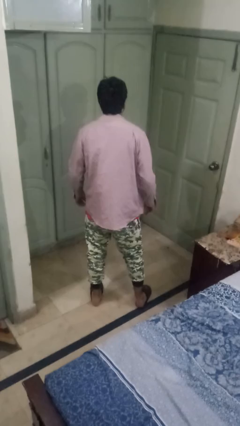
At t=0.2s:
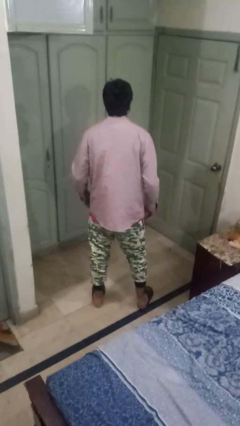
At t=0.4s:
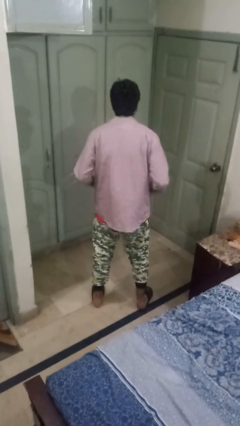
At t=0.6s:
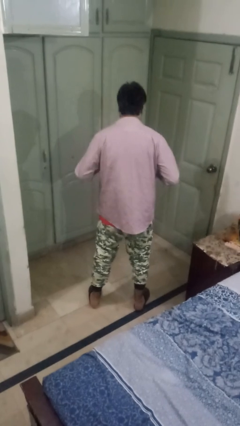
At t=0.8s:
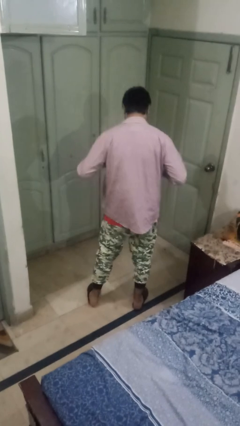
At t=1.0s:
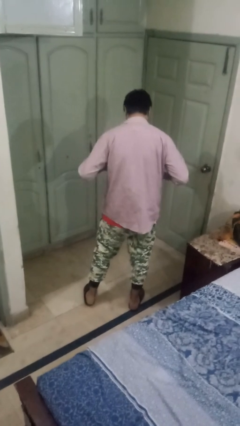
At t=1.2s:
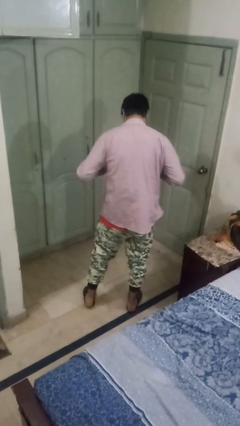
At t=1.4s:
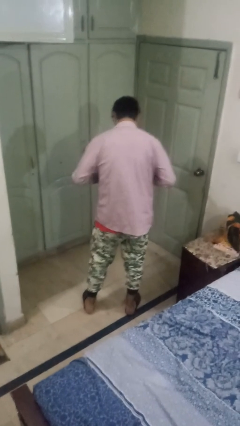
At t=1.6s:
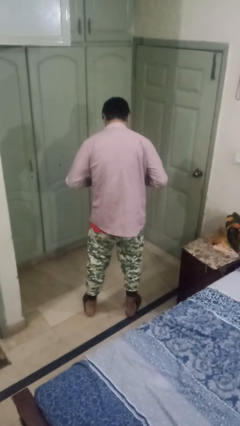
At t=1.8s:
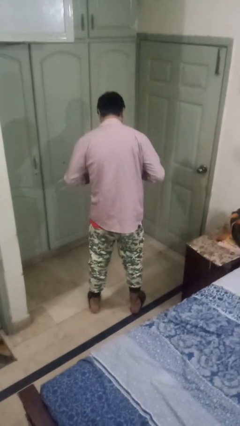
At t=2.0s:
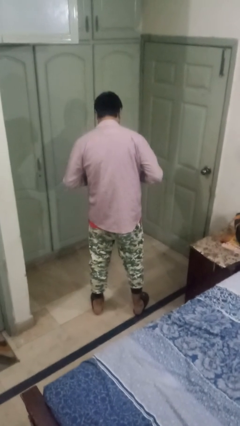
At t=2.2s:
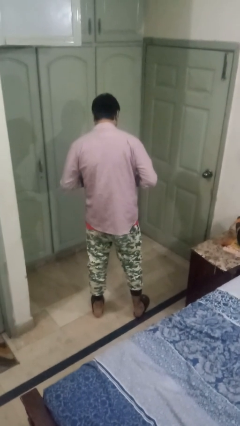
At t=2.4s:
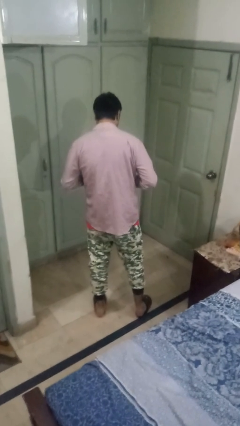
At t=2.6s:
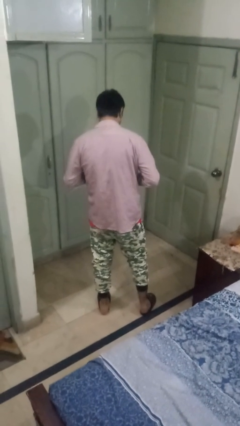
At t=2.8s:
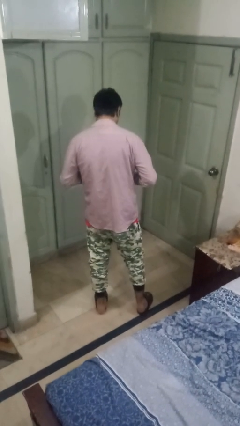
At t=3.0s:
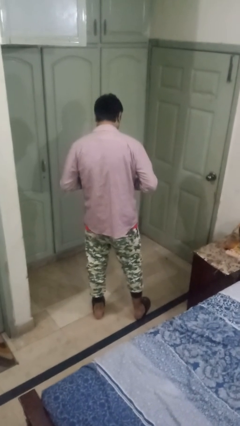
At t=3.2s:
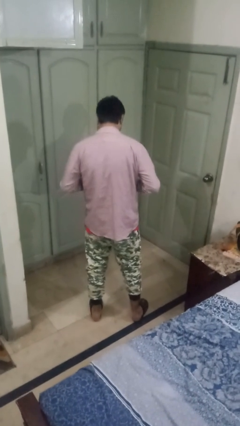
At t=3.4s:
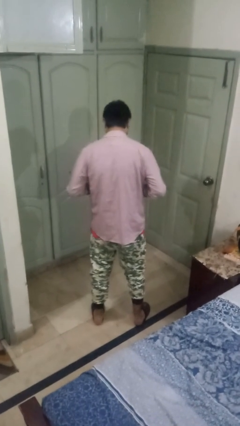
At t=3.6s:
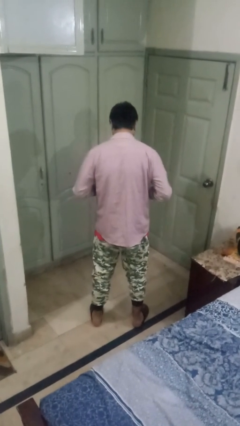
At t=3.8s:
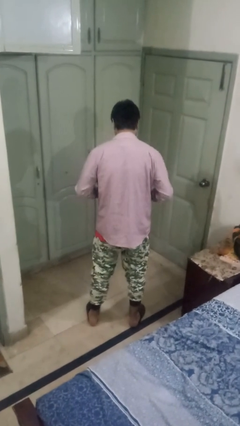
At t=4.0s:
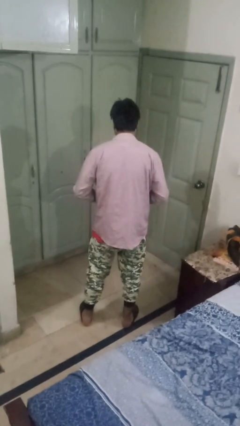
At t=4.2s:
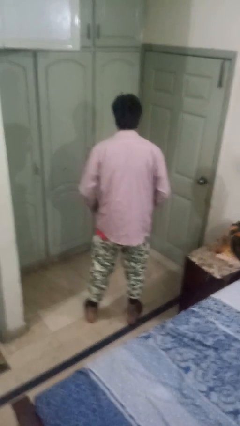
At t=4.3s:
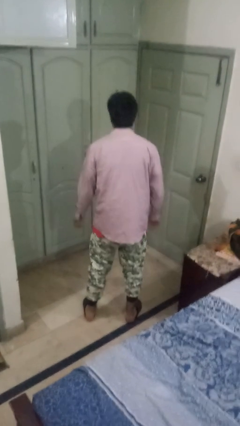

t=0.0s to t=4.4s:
person buttons shirt

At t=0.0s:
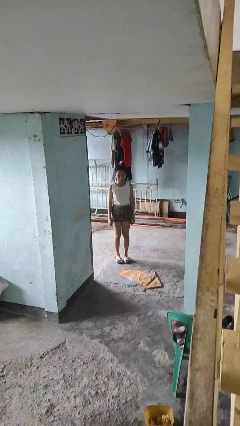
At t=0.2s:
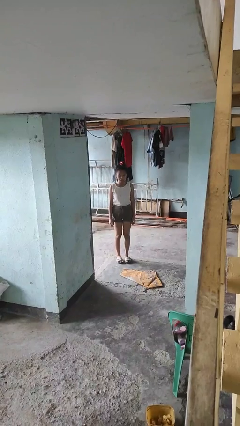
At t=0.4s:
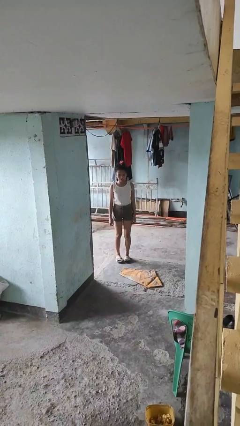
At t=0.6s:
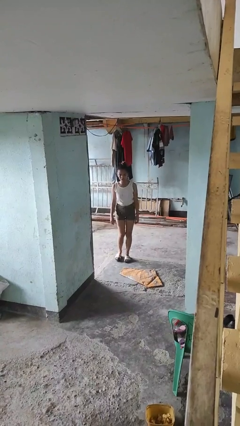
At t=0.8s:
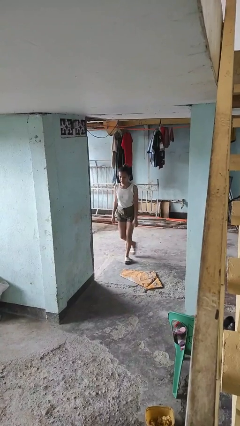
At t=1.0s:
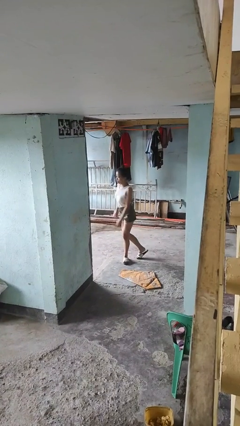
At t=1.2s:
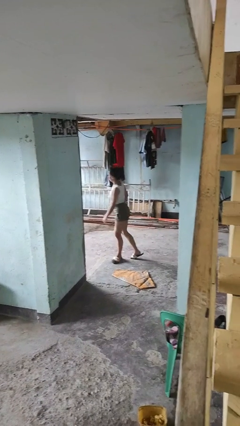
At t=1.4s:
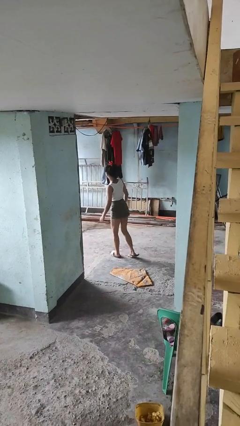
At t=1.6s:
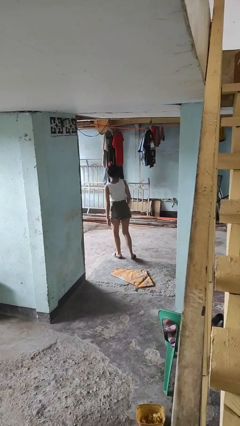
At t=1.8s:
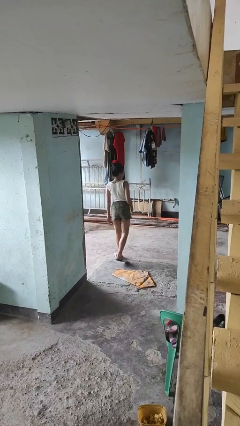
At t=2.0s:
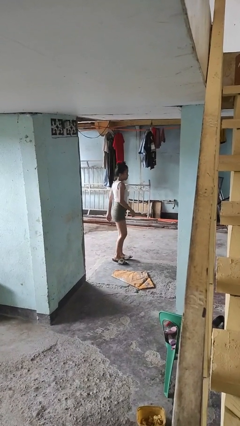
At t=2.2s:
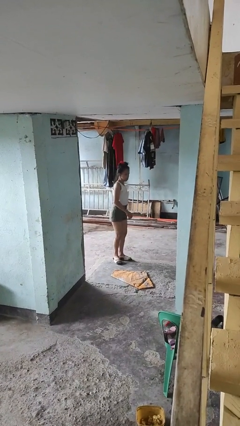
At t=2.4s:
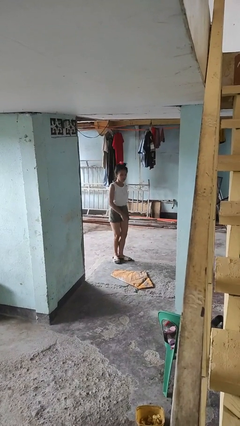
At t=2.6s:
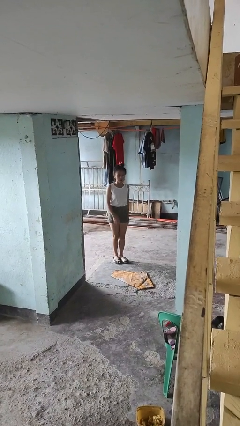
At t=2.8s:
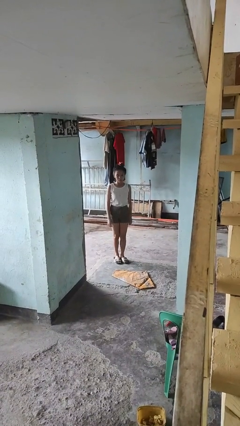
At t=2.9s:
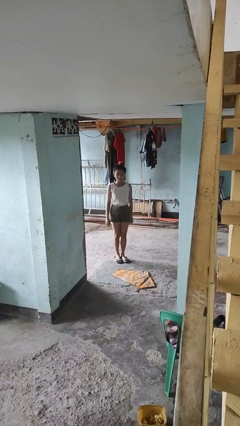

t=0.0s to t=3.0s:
person twirls

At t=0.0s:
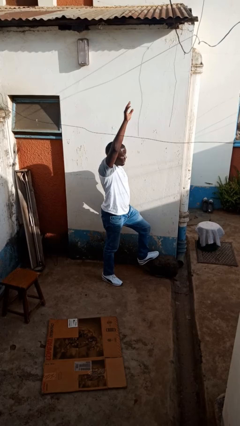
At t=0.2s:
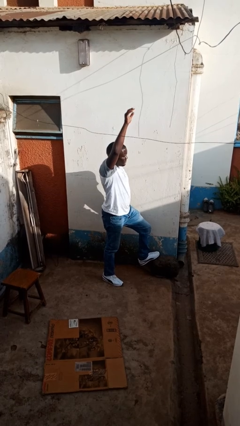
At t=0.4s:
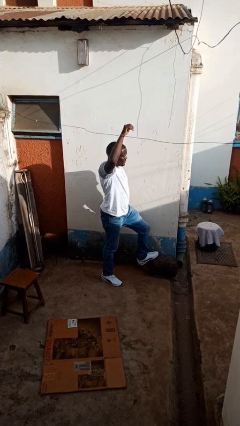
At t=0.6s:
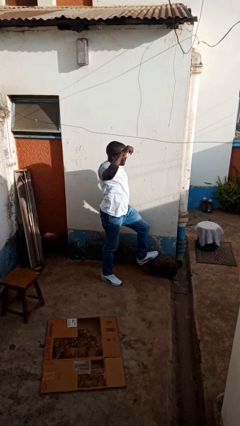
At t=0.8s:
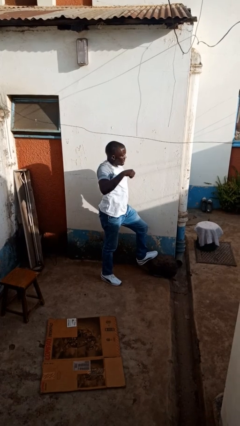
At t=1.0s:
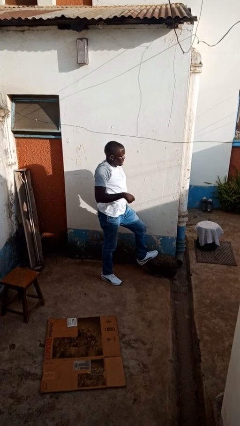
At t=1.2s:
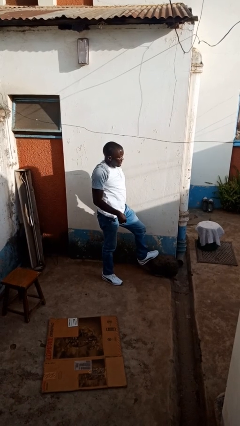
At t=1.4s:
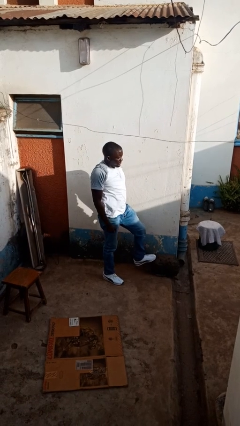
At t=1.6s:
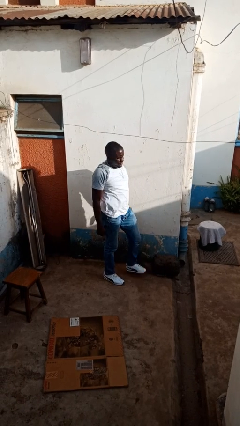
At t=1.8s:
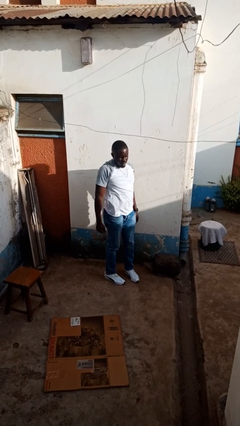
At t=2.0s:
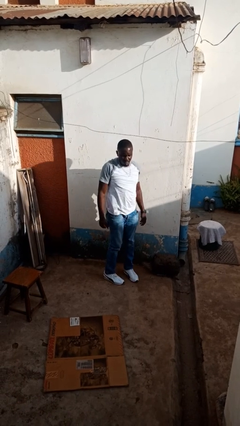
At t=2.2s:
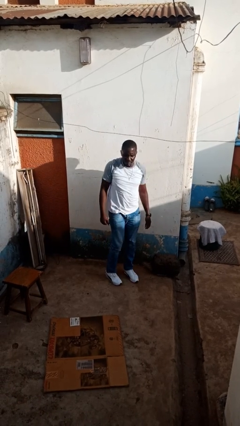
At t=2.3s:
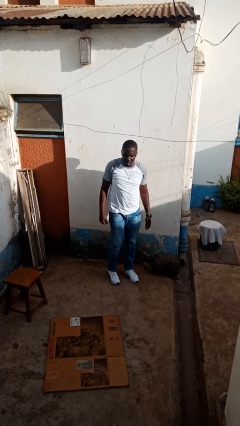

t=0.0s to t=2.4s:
person gestures lower hand

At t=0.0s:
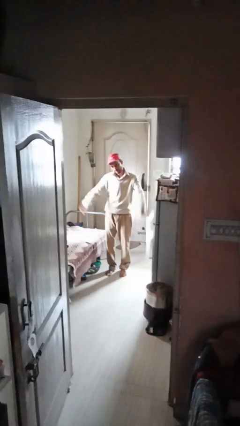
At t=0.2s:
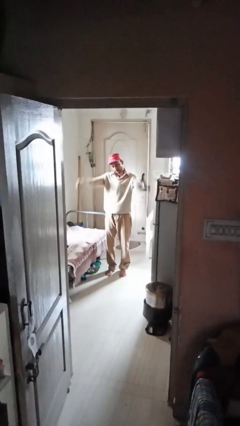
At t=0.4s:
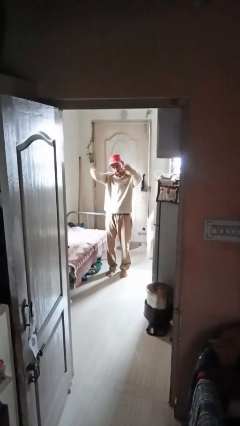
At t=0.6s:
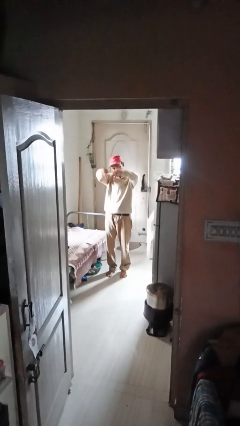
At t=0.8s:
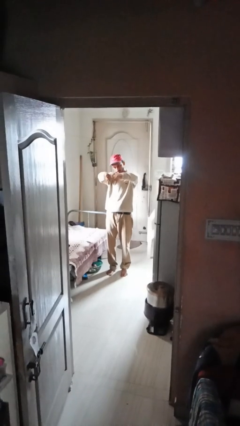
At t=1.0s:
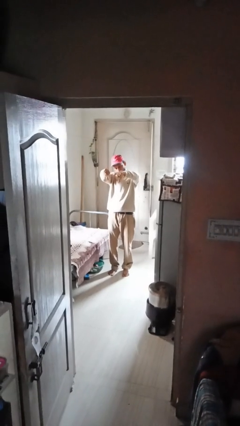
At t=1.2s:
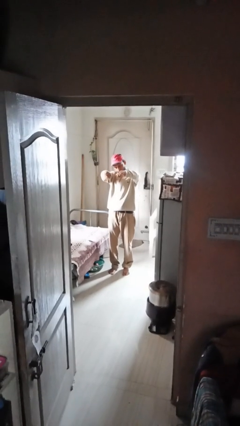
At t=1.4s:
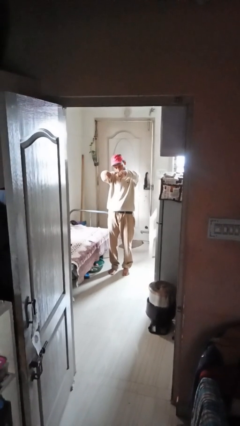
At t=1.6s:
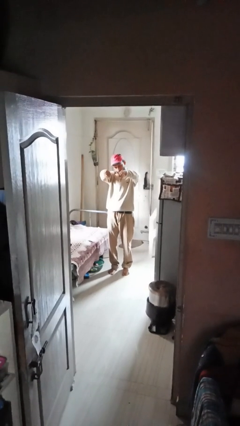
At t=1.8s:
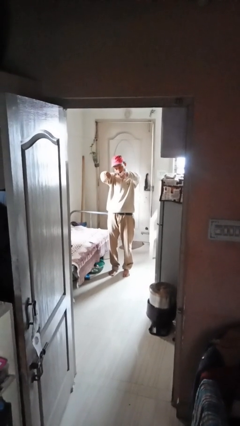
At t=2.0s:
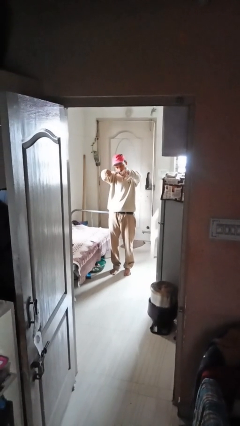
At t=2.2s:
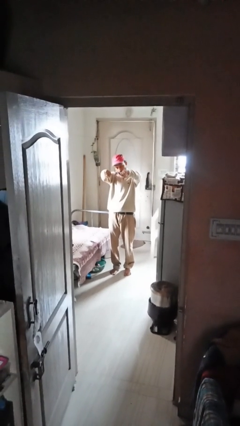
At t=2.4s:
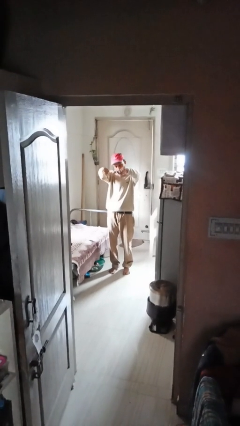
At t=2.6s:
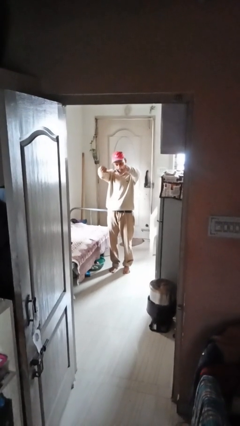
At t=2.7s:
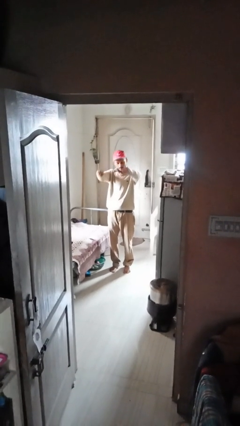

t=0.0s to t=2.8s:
person gestures thumbs down

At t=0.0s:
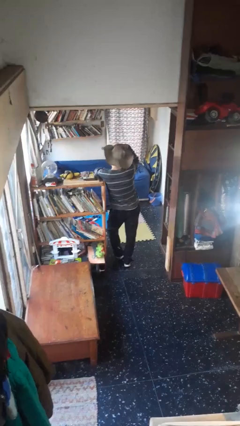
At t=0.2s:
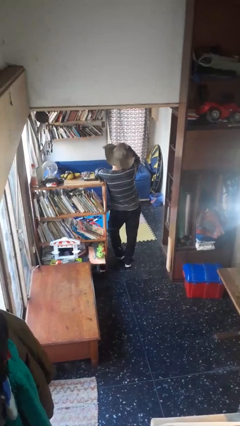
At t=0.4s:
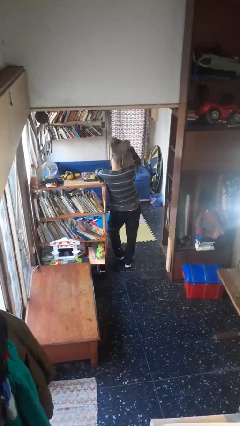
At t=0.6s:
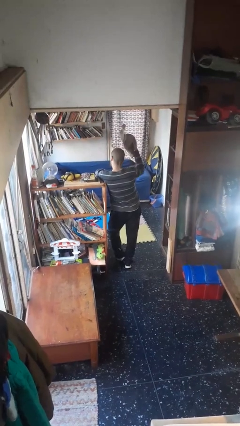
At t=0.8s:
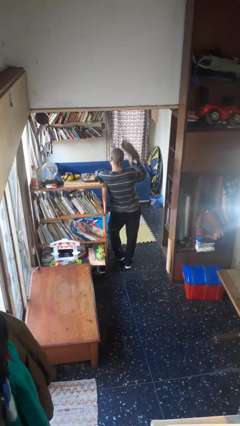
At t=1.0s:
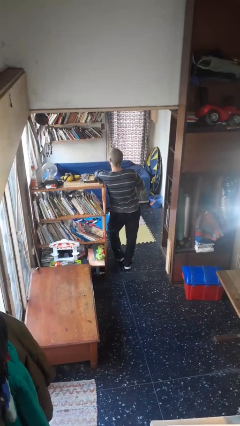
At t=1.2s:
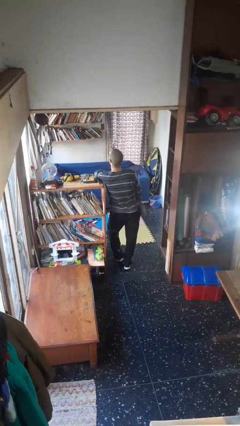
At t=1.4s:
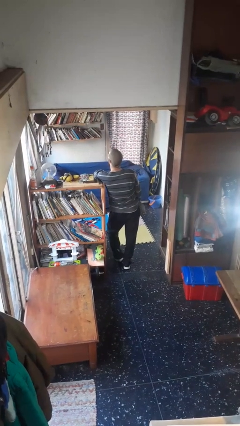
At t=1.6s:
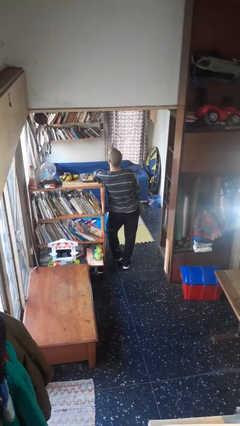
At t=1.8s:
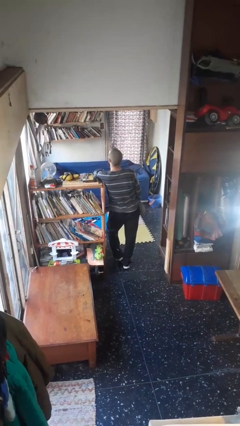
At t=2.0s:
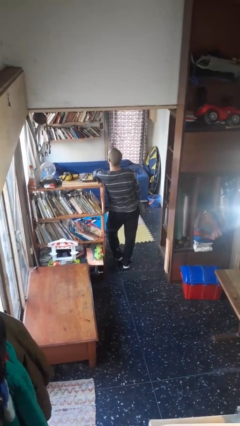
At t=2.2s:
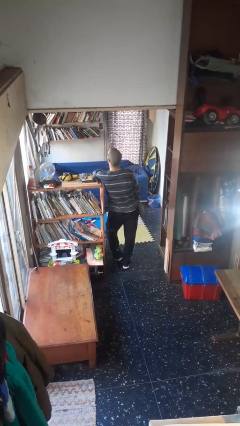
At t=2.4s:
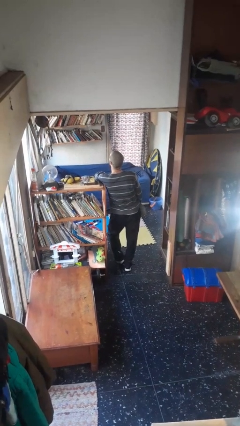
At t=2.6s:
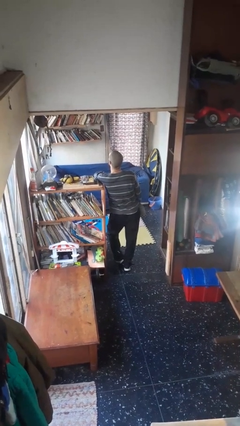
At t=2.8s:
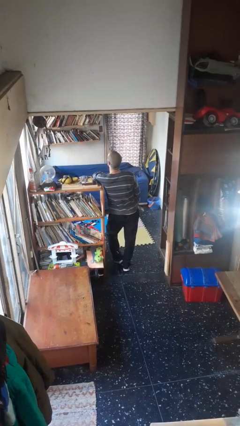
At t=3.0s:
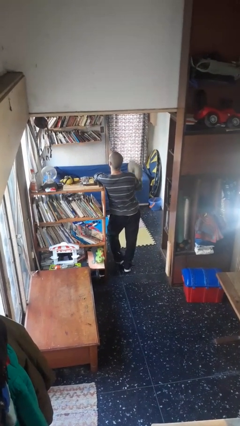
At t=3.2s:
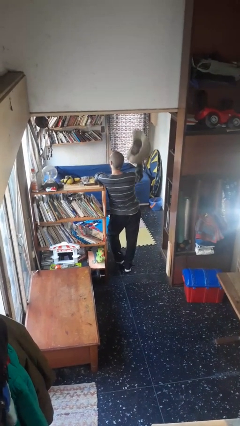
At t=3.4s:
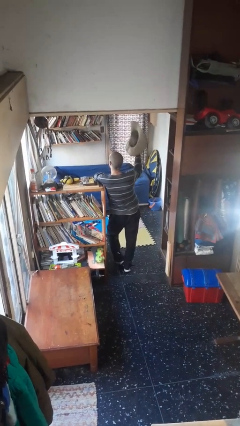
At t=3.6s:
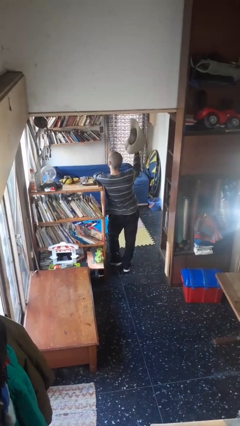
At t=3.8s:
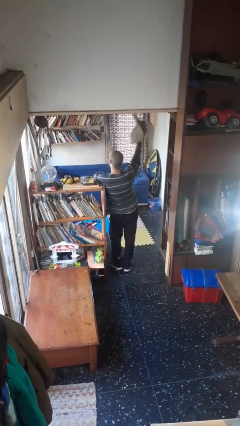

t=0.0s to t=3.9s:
person takes off hat

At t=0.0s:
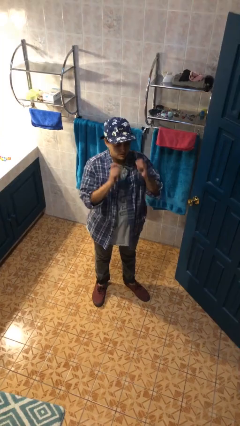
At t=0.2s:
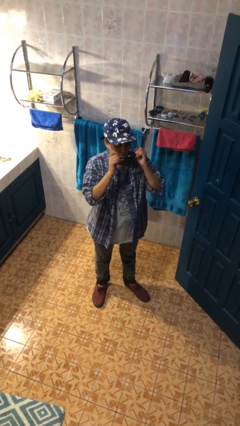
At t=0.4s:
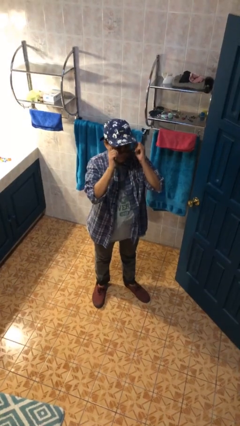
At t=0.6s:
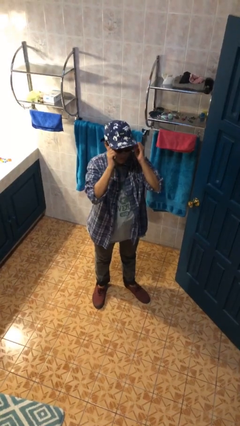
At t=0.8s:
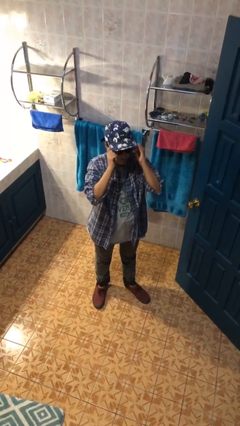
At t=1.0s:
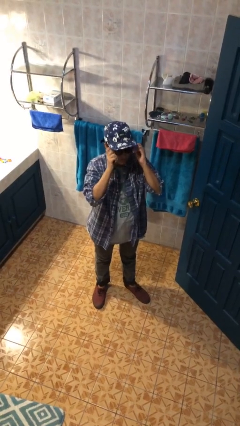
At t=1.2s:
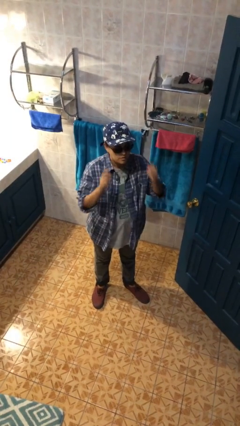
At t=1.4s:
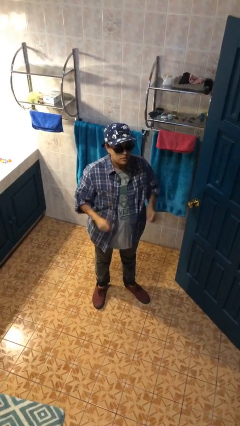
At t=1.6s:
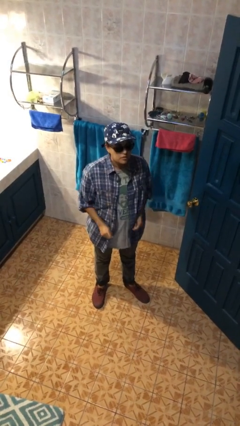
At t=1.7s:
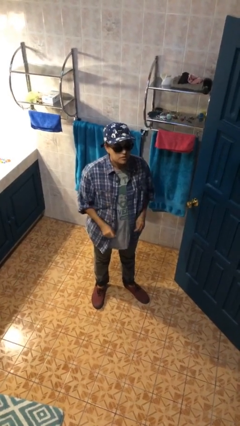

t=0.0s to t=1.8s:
person puts on sunglasses
